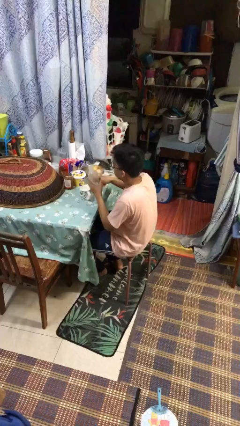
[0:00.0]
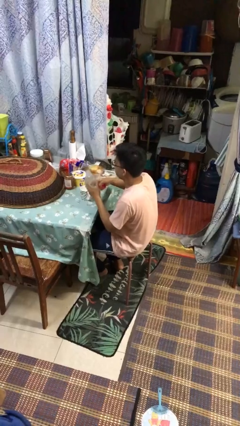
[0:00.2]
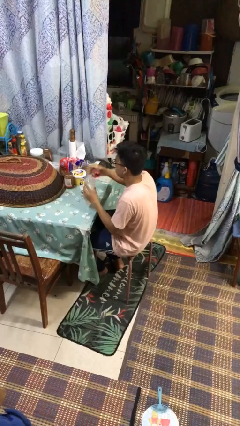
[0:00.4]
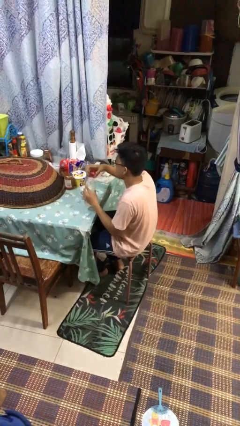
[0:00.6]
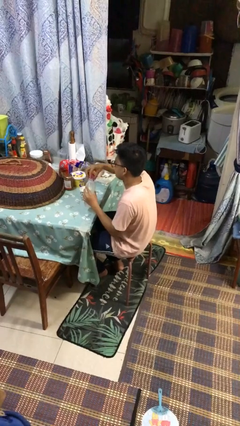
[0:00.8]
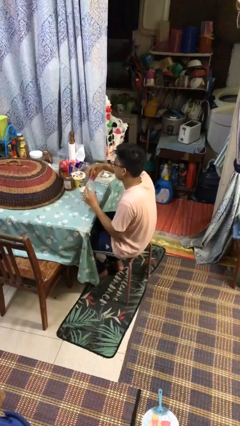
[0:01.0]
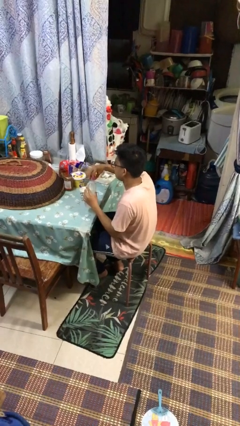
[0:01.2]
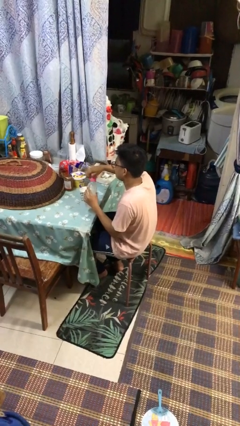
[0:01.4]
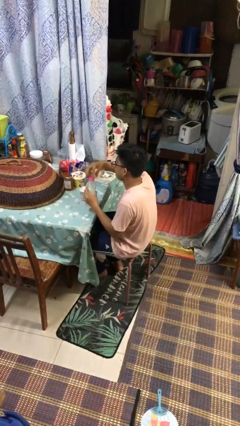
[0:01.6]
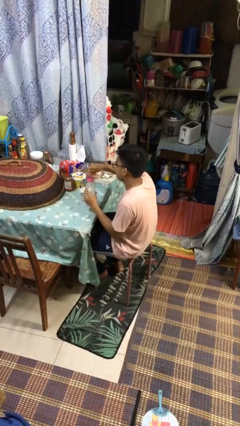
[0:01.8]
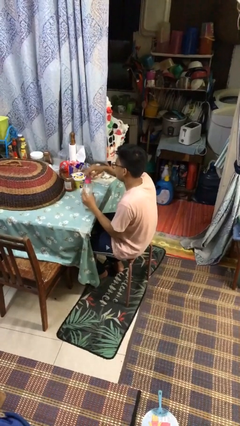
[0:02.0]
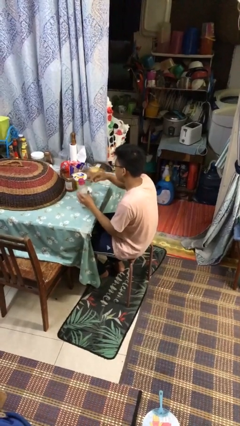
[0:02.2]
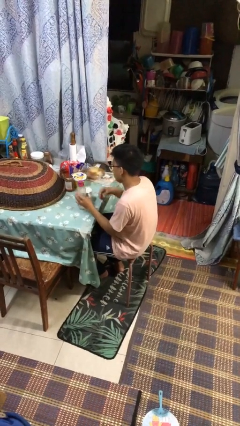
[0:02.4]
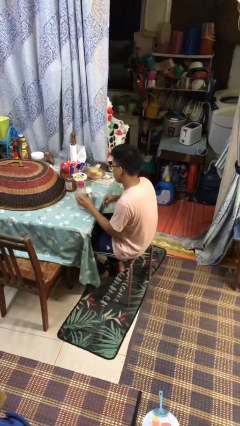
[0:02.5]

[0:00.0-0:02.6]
person screws lid to bottle

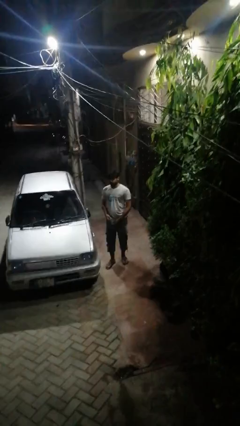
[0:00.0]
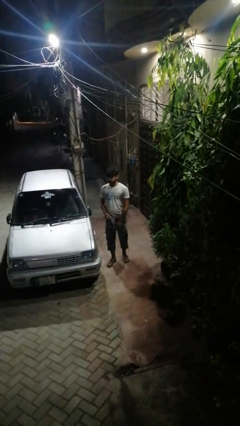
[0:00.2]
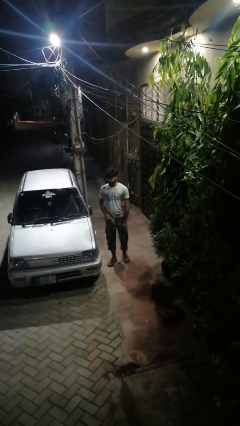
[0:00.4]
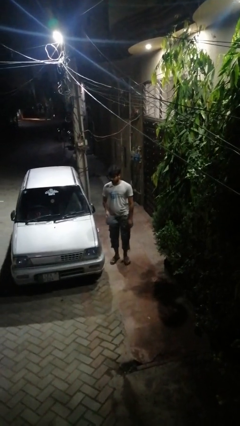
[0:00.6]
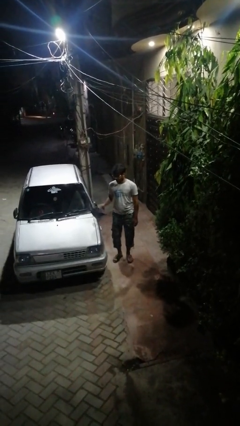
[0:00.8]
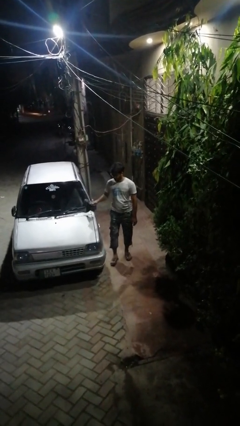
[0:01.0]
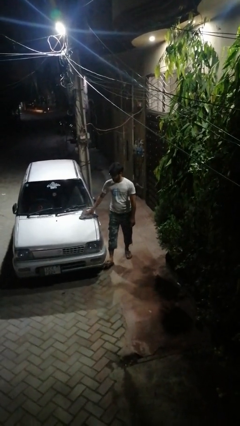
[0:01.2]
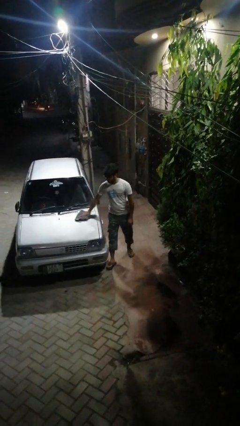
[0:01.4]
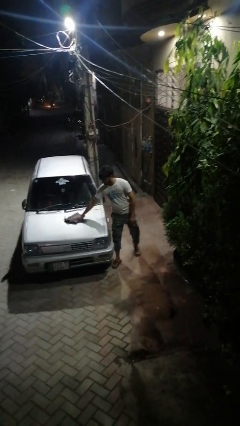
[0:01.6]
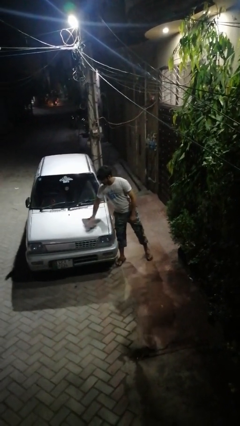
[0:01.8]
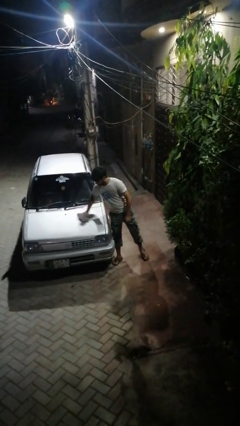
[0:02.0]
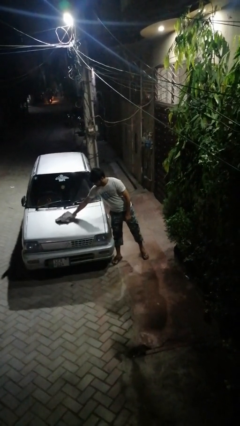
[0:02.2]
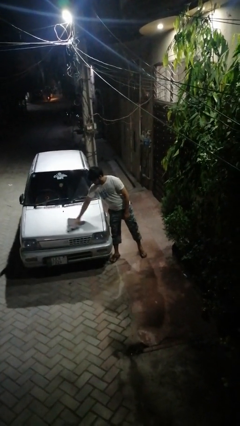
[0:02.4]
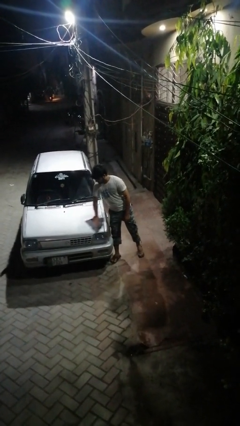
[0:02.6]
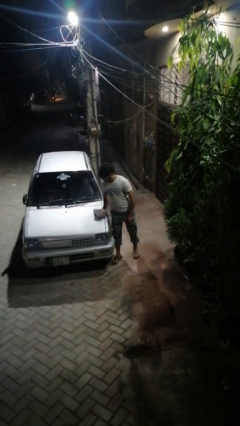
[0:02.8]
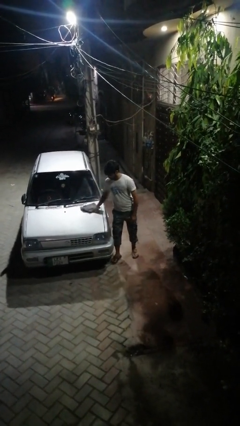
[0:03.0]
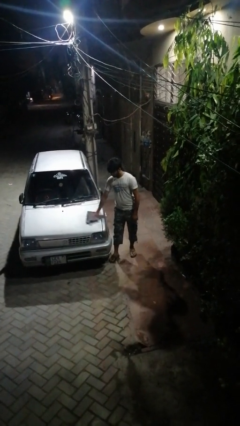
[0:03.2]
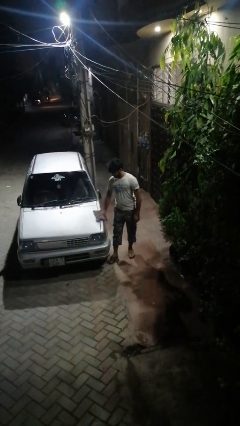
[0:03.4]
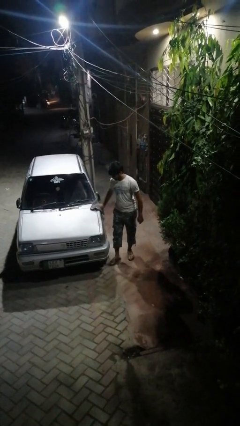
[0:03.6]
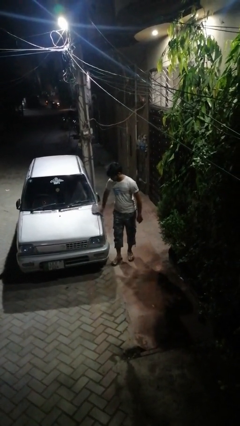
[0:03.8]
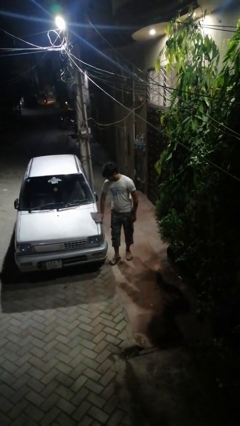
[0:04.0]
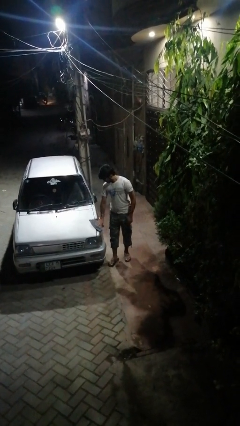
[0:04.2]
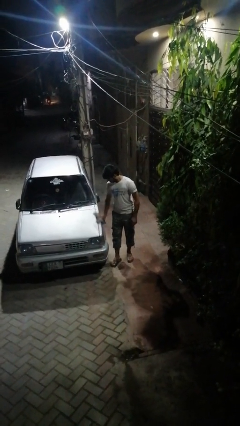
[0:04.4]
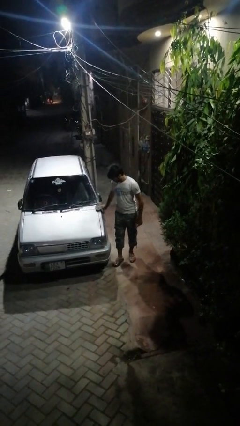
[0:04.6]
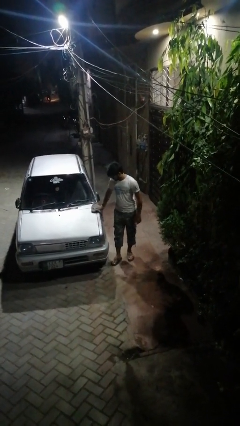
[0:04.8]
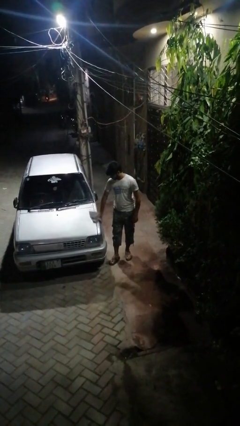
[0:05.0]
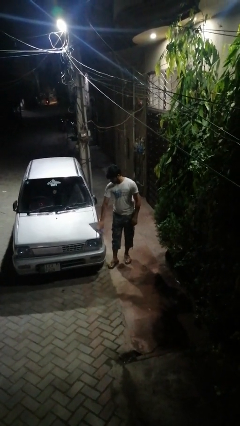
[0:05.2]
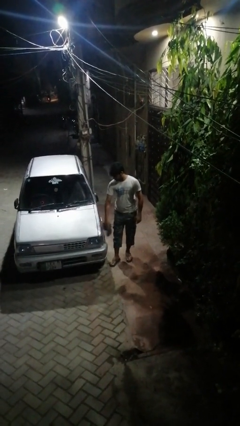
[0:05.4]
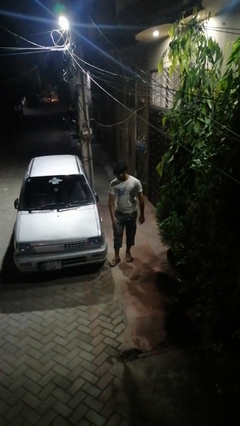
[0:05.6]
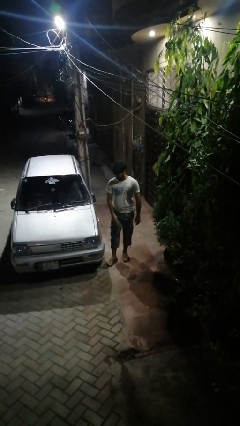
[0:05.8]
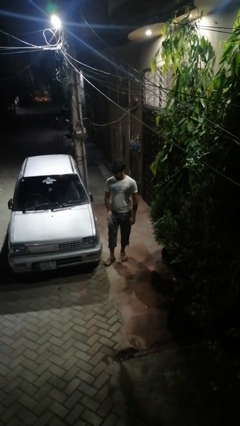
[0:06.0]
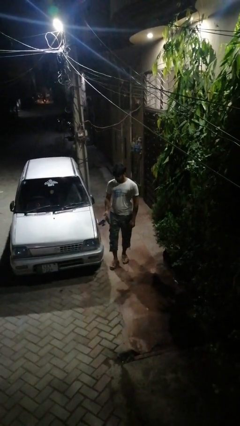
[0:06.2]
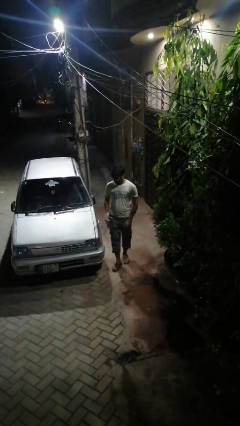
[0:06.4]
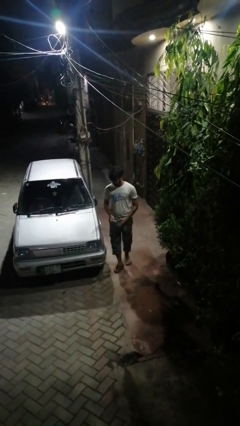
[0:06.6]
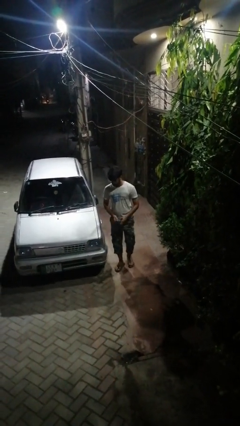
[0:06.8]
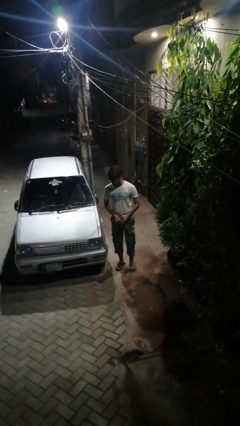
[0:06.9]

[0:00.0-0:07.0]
person polishes car with rag

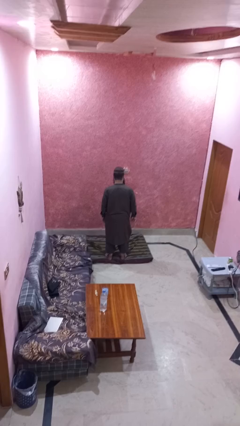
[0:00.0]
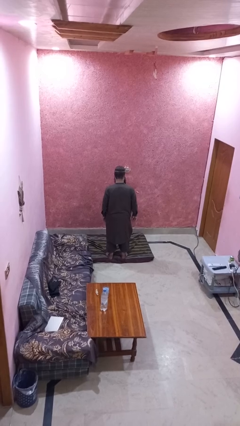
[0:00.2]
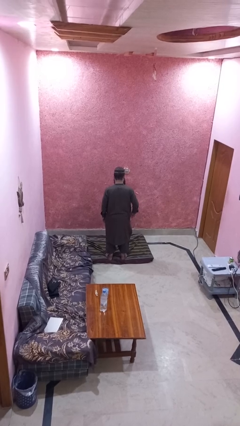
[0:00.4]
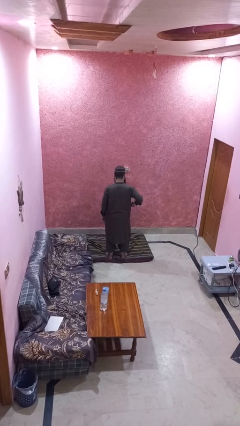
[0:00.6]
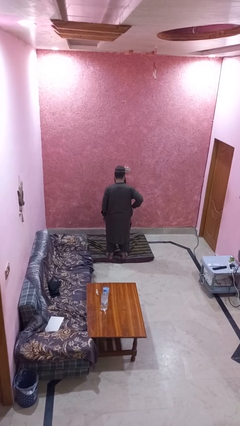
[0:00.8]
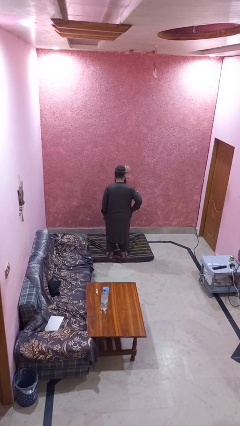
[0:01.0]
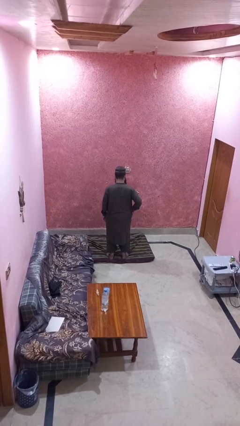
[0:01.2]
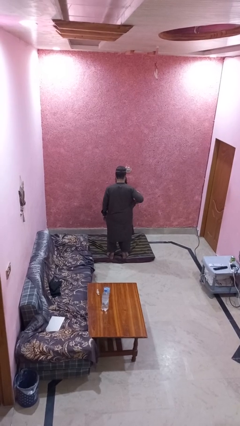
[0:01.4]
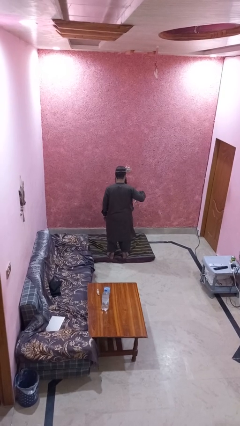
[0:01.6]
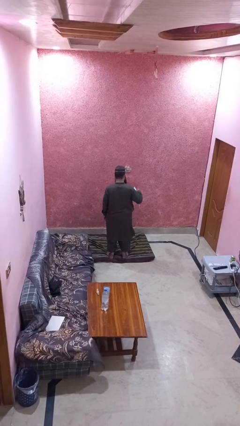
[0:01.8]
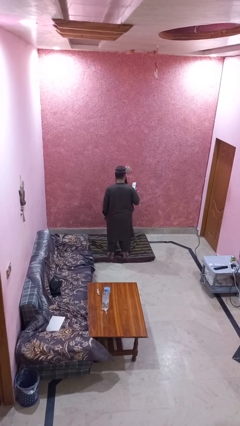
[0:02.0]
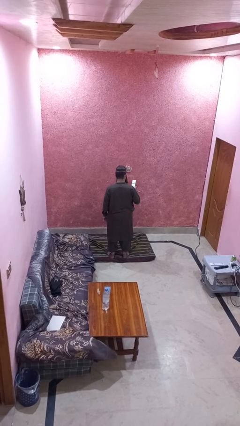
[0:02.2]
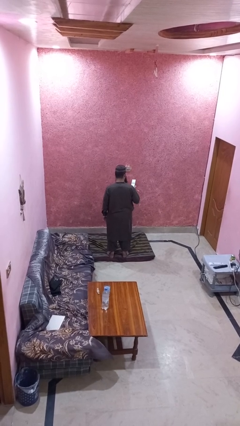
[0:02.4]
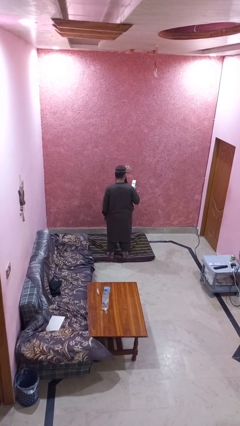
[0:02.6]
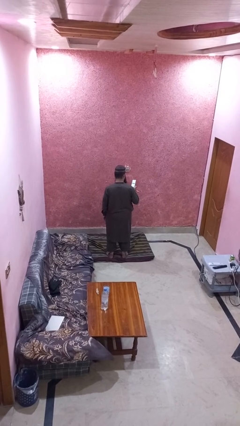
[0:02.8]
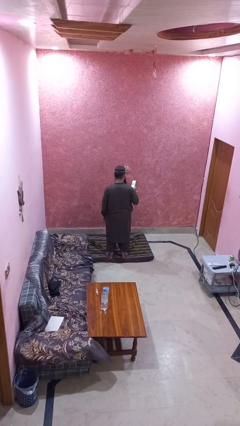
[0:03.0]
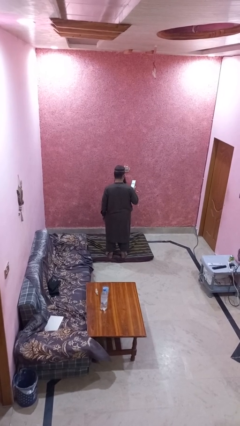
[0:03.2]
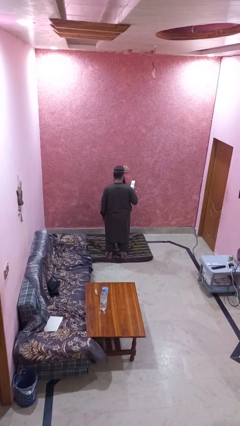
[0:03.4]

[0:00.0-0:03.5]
person takes phone from pocket

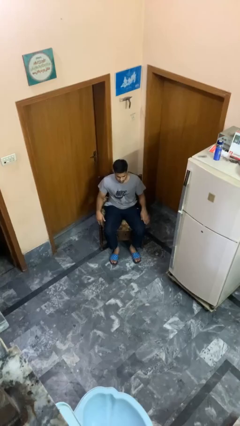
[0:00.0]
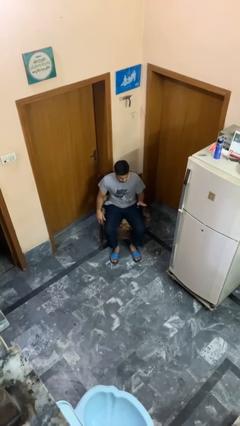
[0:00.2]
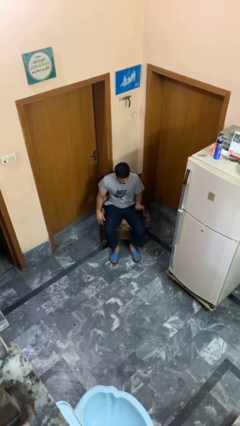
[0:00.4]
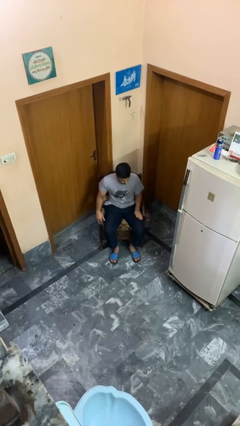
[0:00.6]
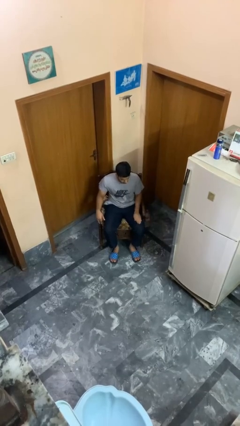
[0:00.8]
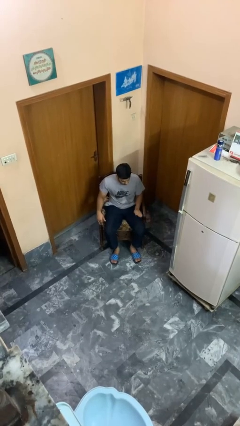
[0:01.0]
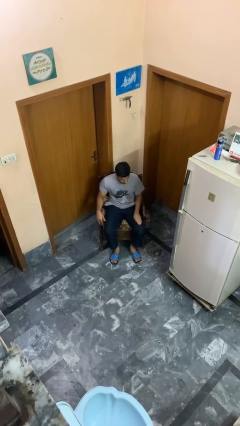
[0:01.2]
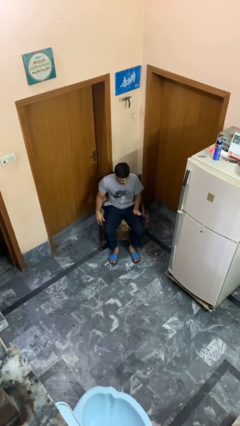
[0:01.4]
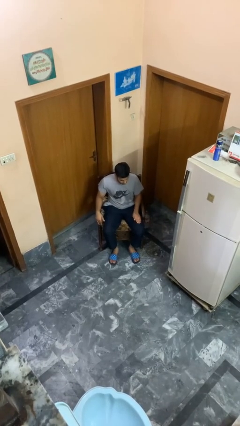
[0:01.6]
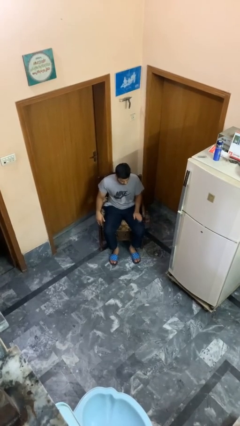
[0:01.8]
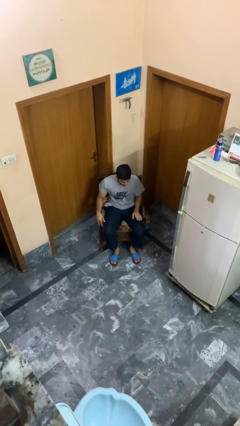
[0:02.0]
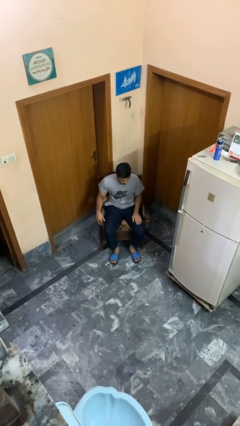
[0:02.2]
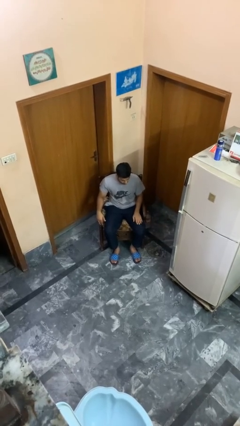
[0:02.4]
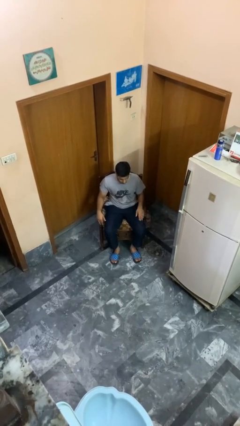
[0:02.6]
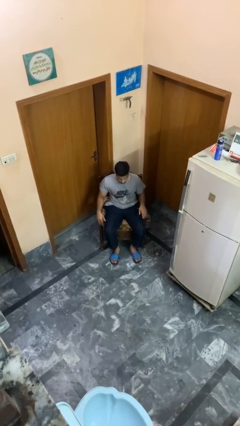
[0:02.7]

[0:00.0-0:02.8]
person slaps hands on thighs

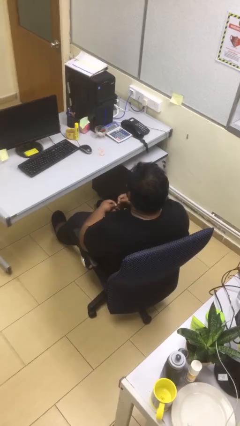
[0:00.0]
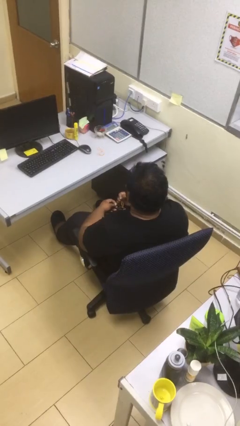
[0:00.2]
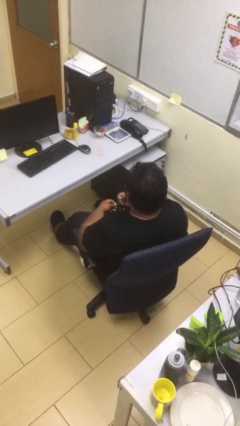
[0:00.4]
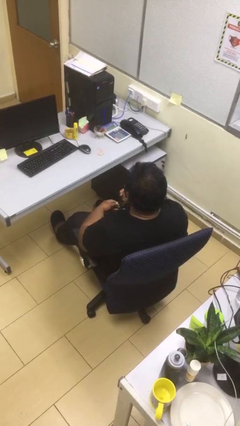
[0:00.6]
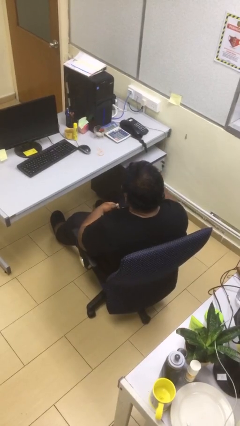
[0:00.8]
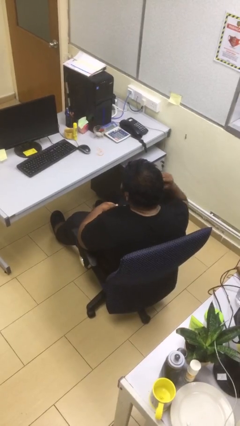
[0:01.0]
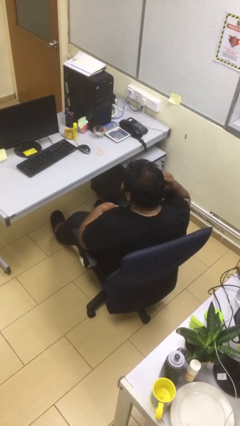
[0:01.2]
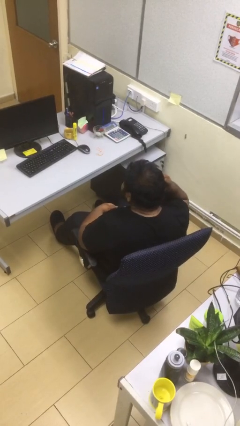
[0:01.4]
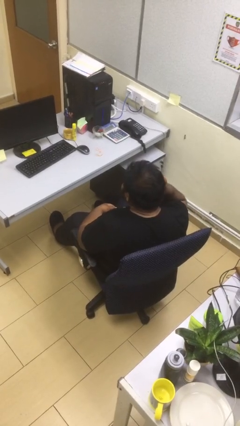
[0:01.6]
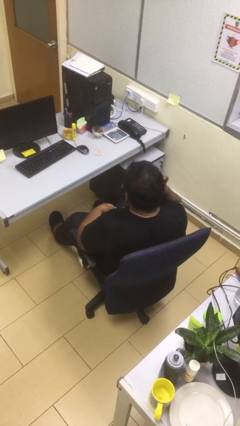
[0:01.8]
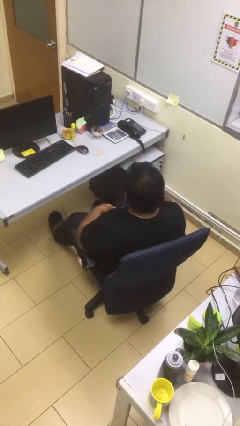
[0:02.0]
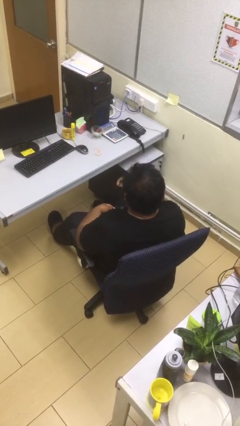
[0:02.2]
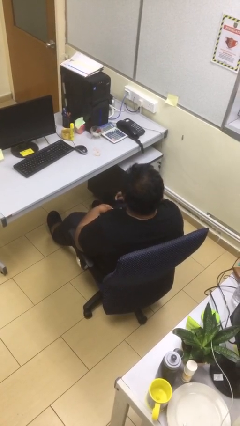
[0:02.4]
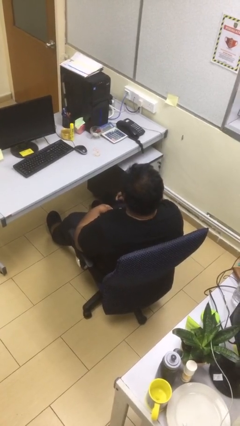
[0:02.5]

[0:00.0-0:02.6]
person puts on earrings
